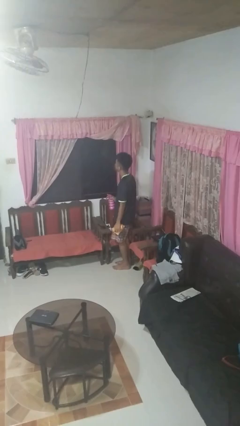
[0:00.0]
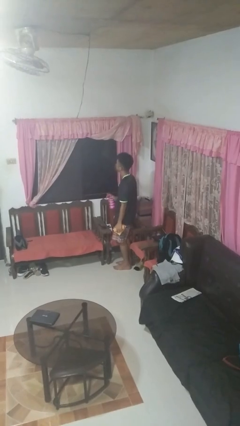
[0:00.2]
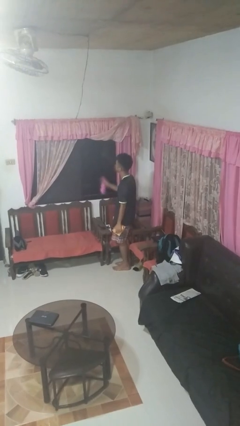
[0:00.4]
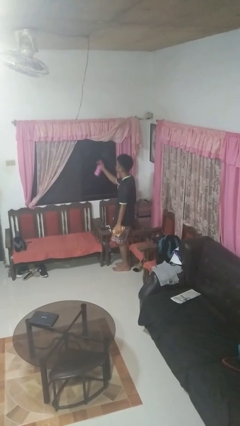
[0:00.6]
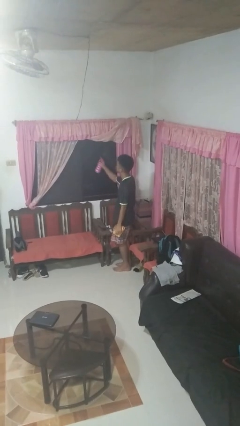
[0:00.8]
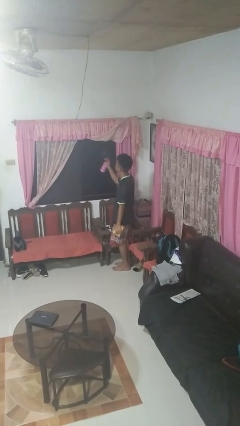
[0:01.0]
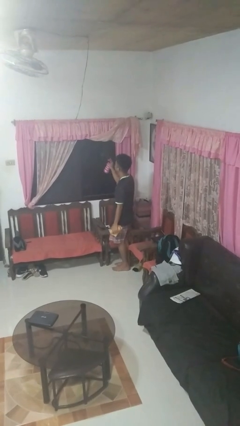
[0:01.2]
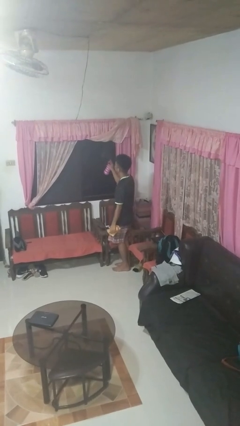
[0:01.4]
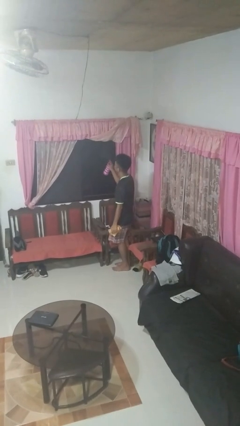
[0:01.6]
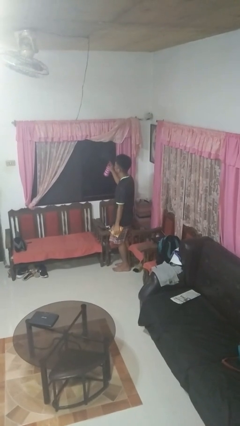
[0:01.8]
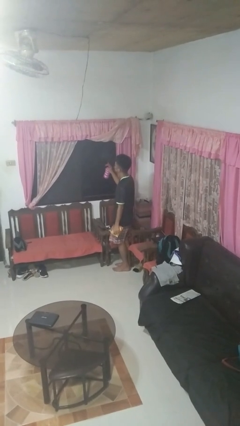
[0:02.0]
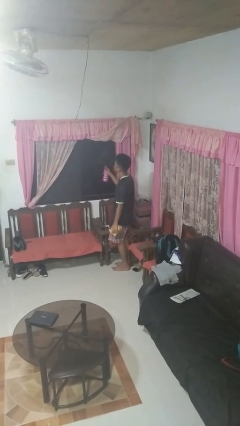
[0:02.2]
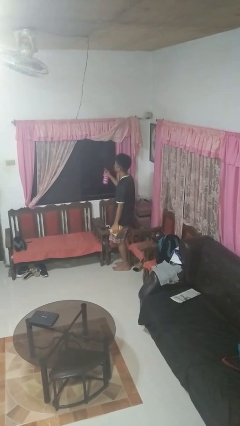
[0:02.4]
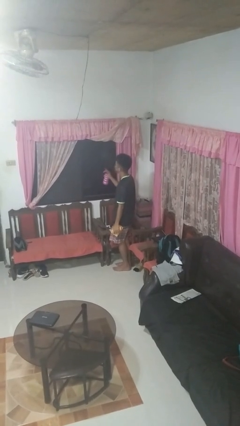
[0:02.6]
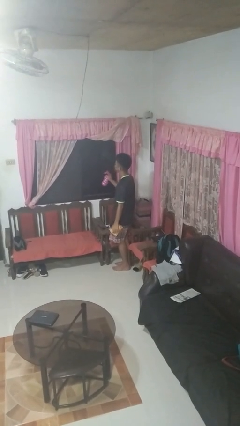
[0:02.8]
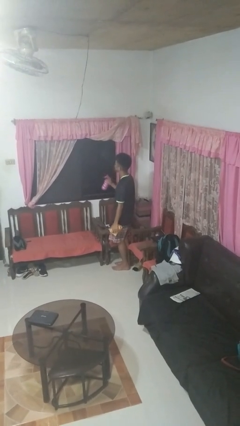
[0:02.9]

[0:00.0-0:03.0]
person sprays from bottle

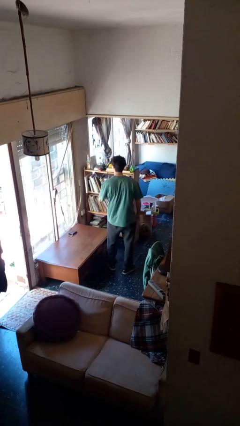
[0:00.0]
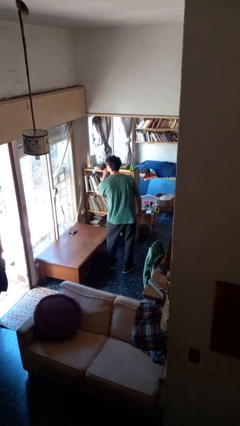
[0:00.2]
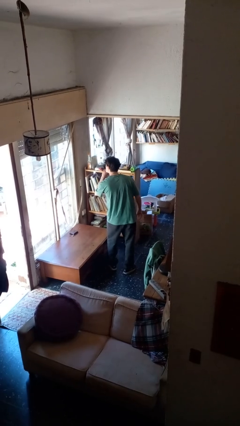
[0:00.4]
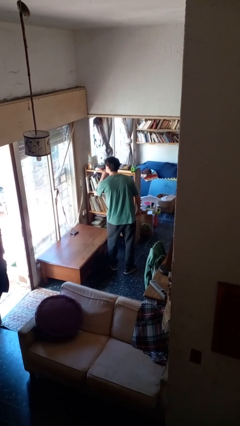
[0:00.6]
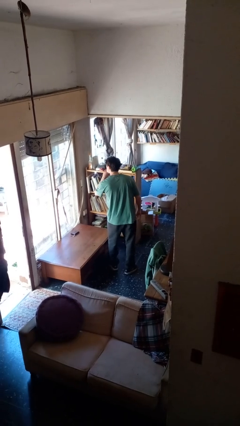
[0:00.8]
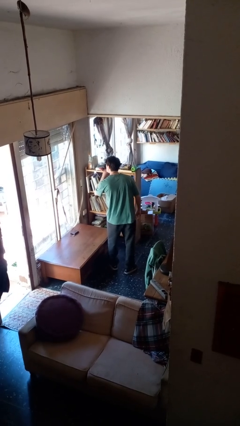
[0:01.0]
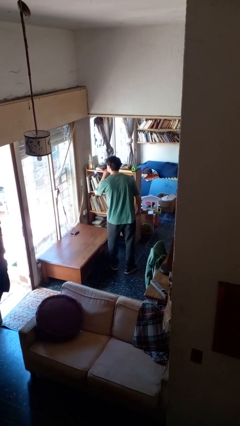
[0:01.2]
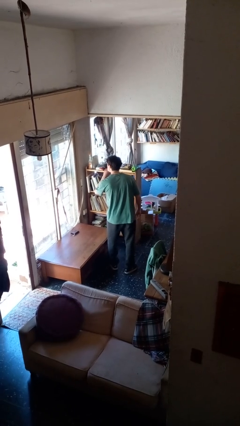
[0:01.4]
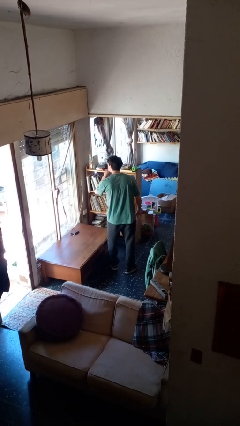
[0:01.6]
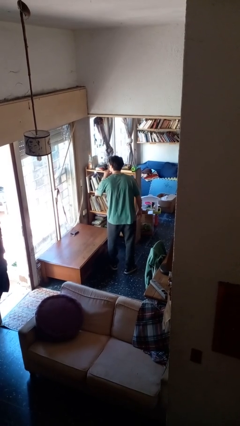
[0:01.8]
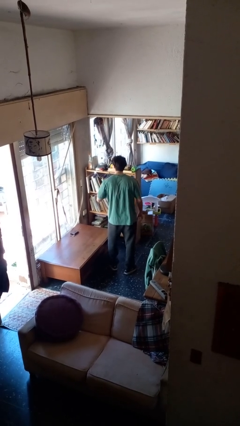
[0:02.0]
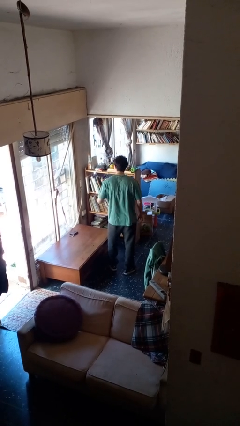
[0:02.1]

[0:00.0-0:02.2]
person gestures be quiet

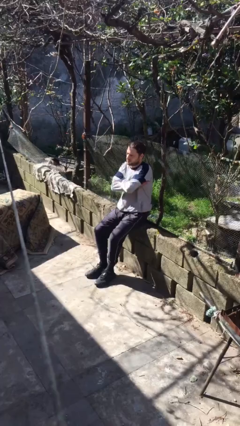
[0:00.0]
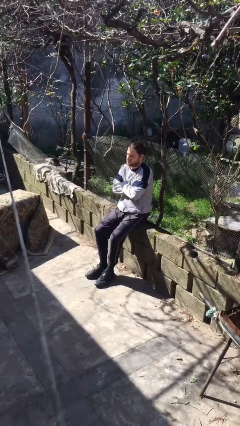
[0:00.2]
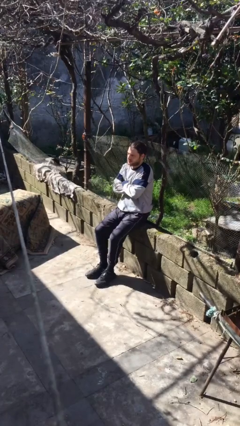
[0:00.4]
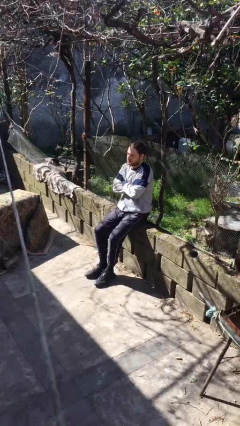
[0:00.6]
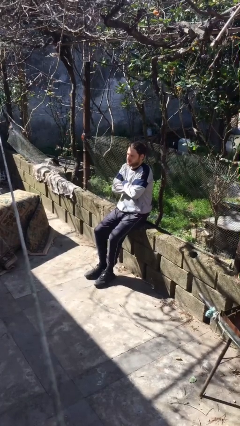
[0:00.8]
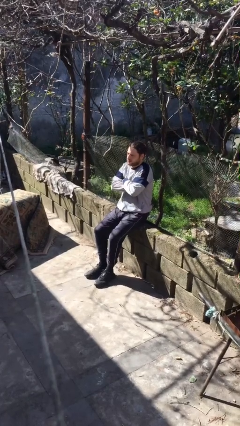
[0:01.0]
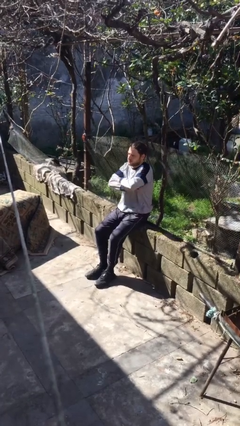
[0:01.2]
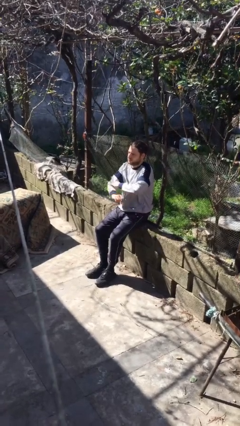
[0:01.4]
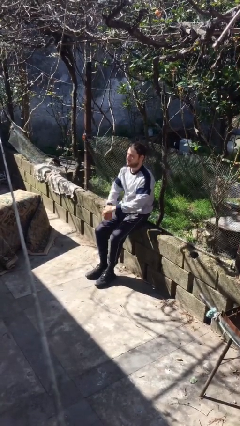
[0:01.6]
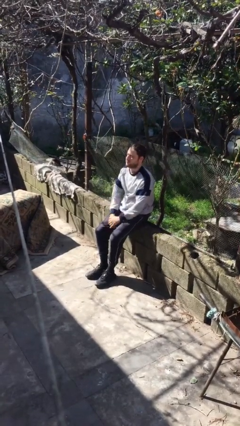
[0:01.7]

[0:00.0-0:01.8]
person crosses arms

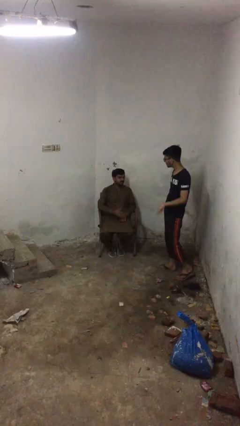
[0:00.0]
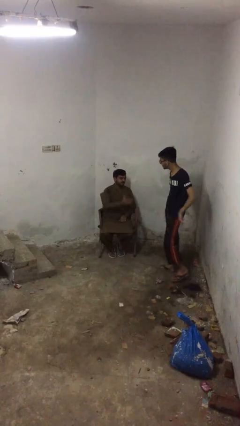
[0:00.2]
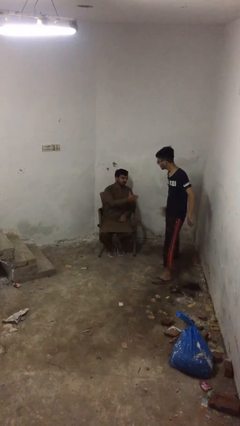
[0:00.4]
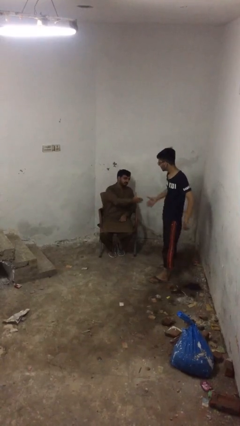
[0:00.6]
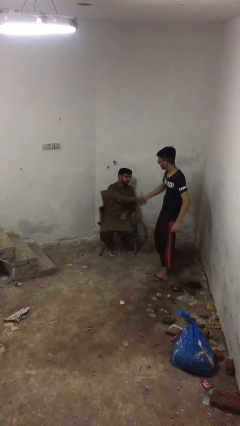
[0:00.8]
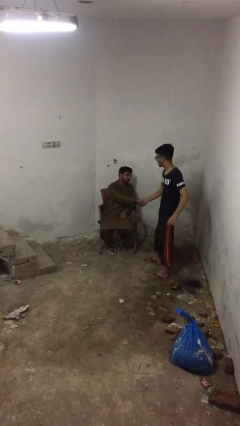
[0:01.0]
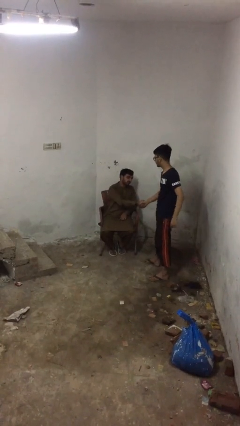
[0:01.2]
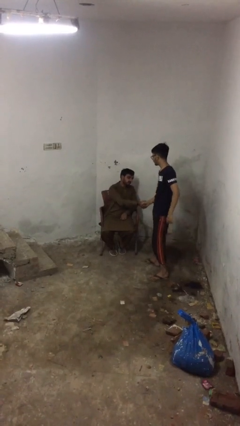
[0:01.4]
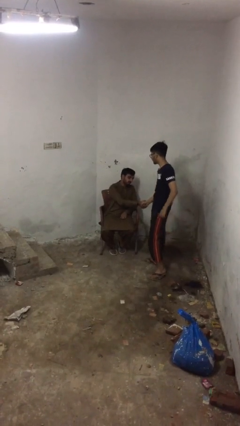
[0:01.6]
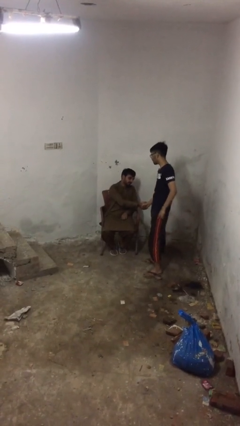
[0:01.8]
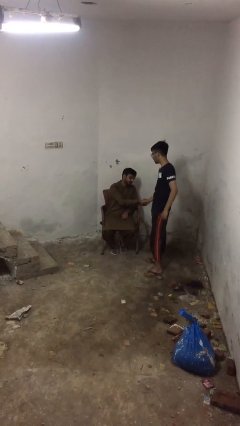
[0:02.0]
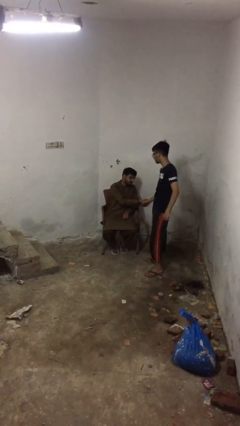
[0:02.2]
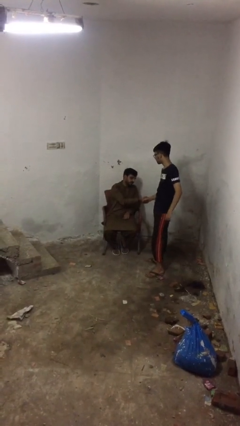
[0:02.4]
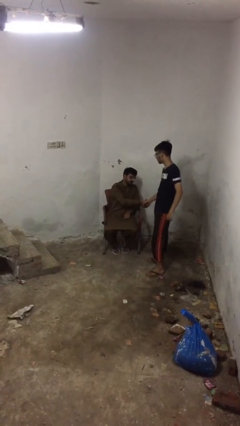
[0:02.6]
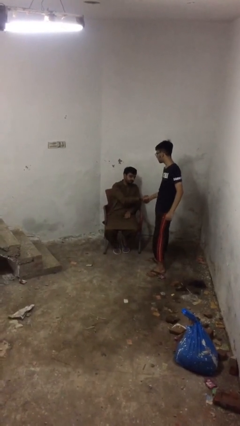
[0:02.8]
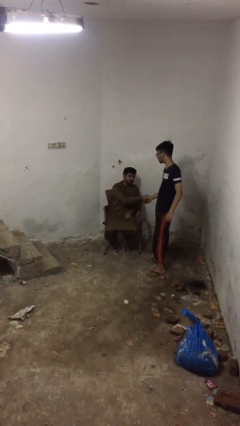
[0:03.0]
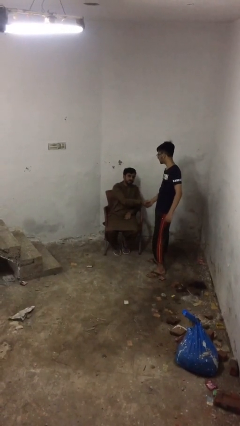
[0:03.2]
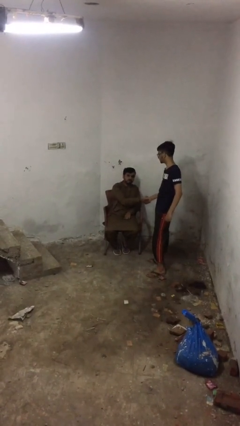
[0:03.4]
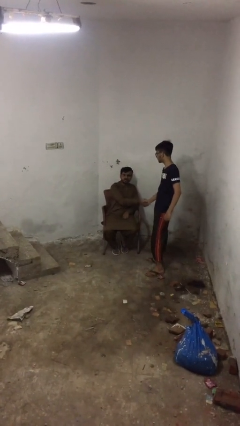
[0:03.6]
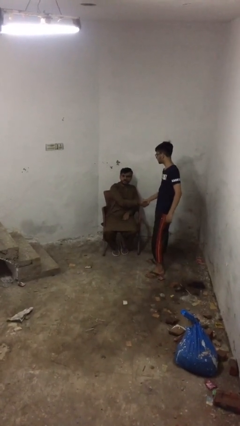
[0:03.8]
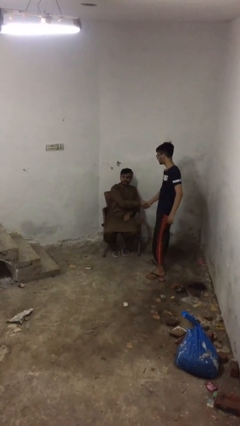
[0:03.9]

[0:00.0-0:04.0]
person shakes hand

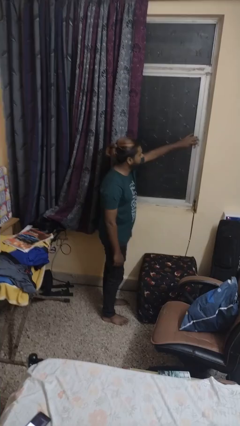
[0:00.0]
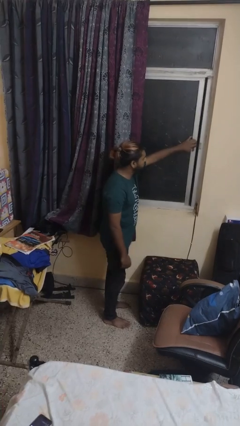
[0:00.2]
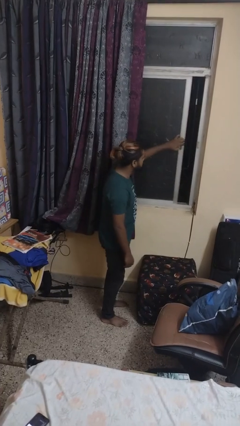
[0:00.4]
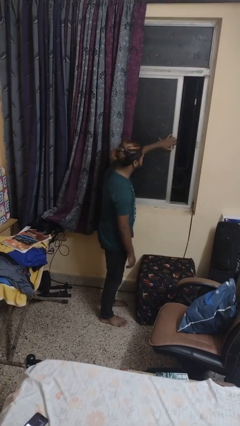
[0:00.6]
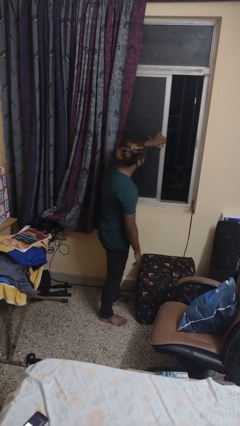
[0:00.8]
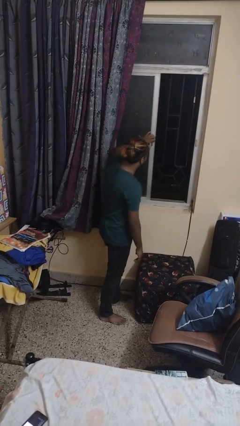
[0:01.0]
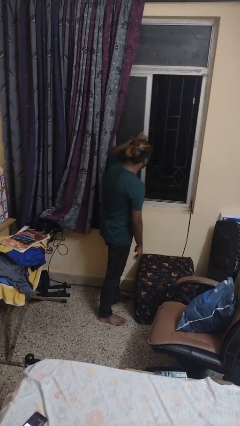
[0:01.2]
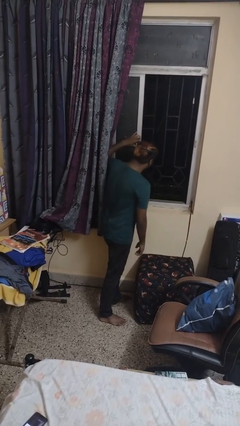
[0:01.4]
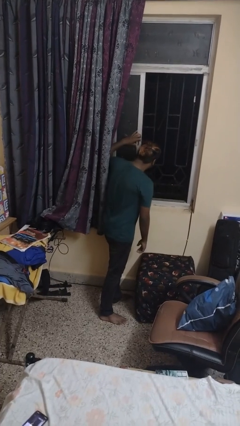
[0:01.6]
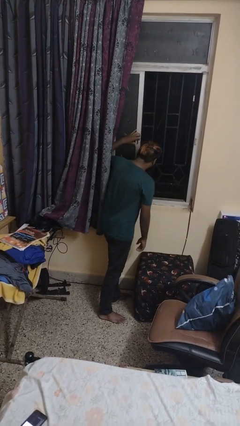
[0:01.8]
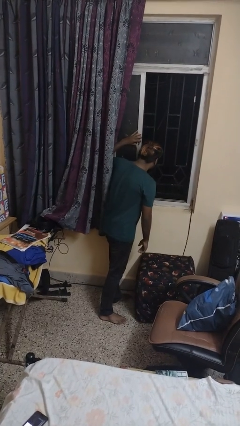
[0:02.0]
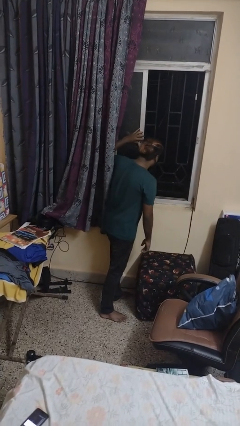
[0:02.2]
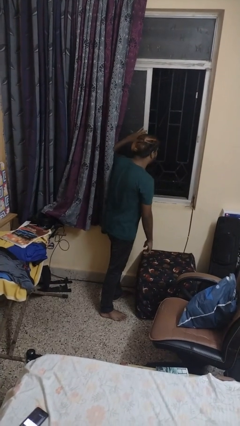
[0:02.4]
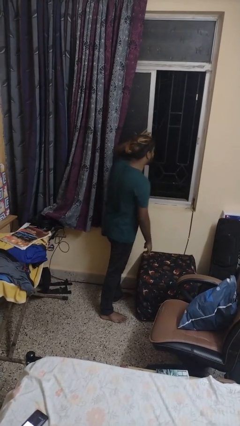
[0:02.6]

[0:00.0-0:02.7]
person opens sliding door

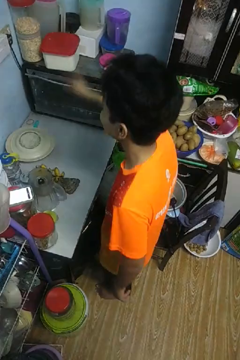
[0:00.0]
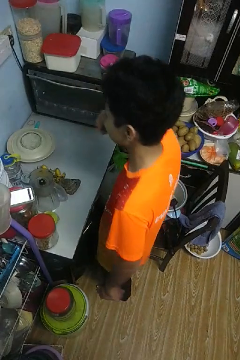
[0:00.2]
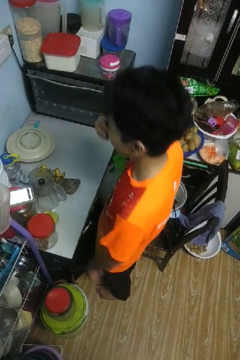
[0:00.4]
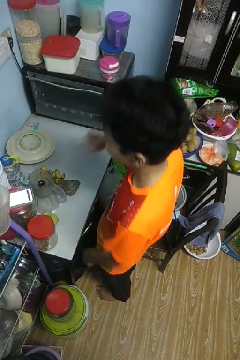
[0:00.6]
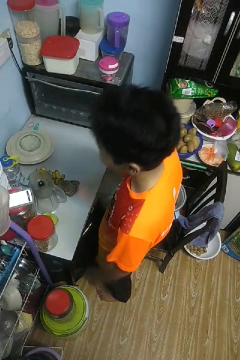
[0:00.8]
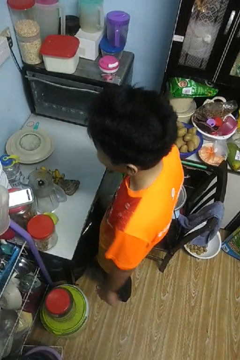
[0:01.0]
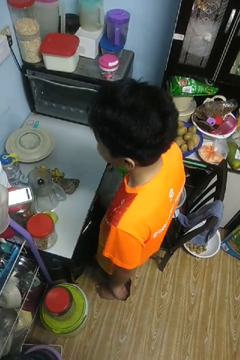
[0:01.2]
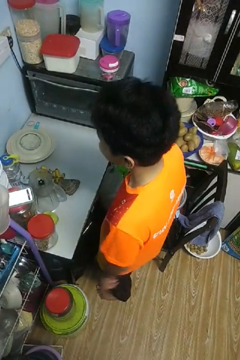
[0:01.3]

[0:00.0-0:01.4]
person burns hand

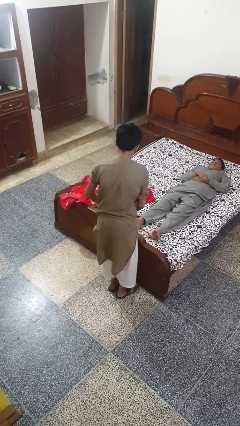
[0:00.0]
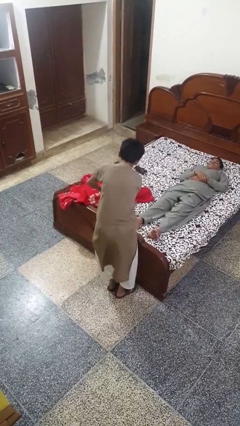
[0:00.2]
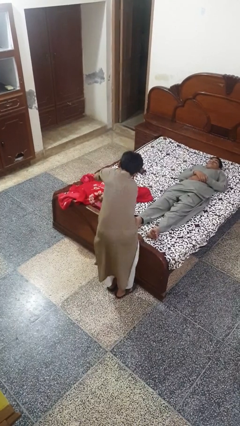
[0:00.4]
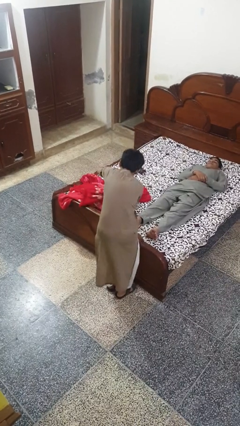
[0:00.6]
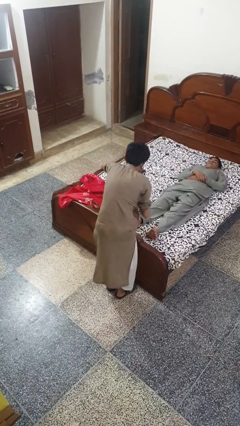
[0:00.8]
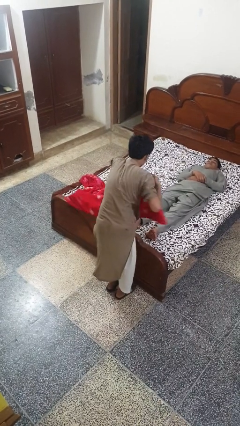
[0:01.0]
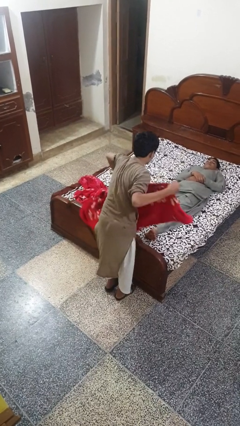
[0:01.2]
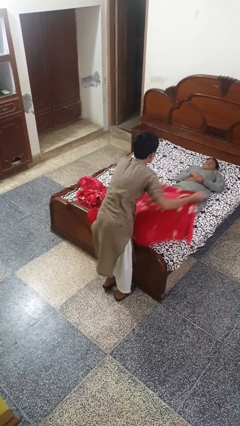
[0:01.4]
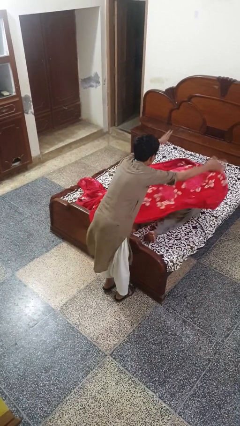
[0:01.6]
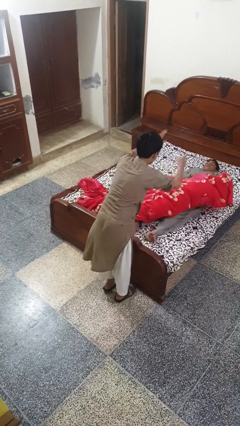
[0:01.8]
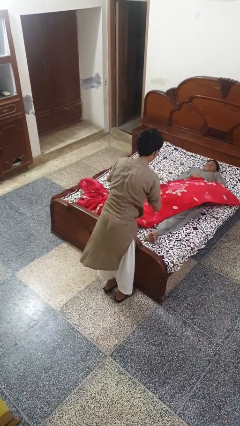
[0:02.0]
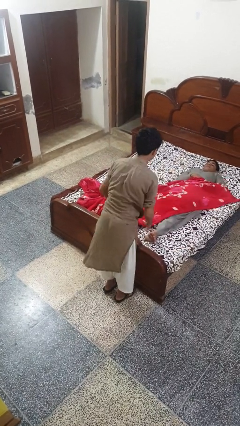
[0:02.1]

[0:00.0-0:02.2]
person covers friend with blanket

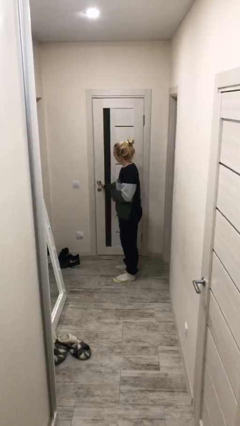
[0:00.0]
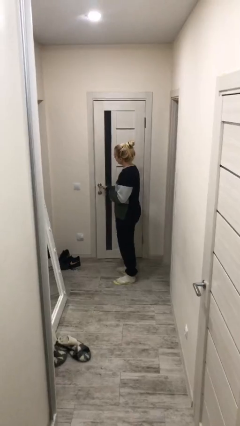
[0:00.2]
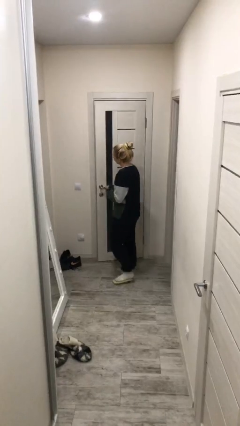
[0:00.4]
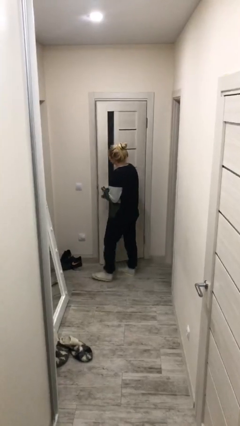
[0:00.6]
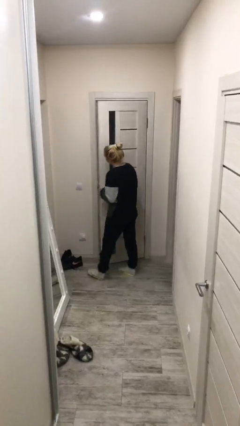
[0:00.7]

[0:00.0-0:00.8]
person opens facility door
